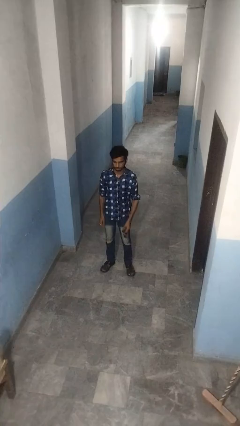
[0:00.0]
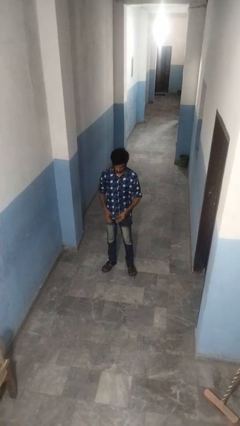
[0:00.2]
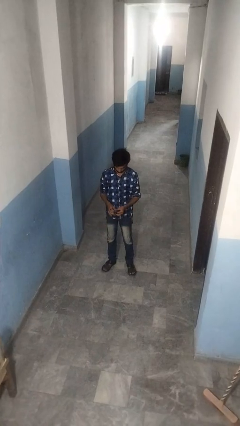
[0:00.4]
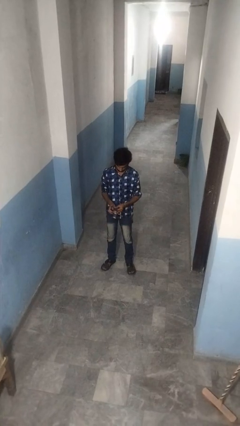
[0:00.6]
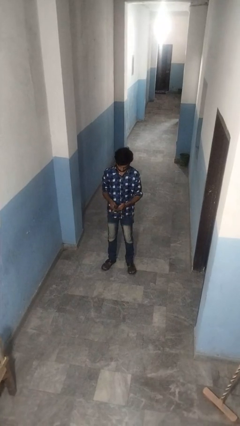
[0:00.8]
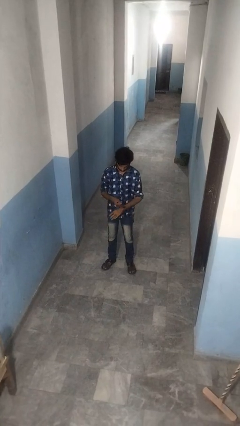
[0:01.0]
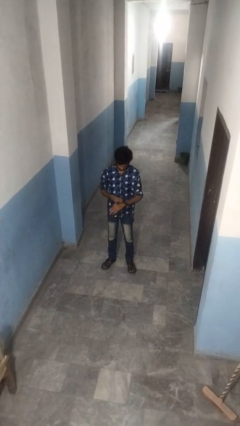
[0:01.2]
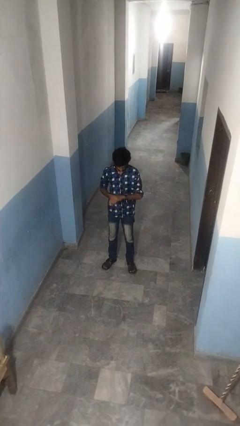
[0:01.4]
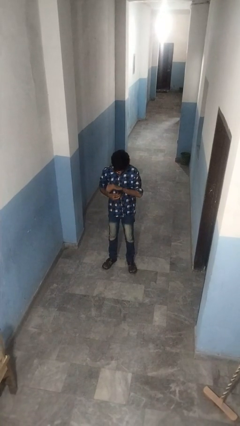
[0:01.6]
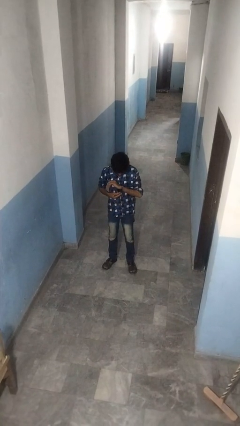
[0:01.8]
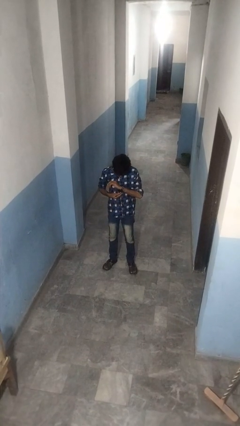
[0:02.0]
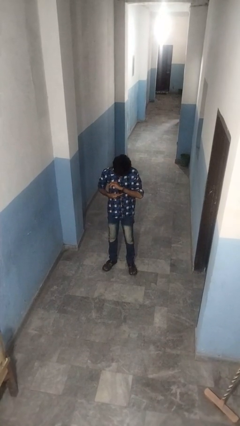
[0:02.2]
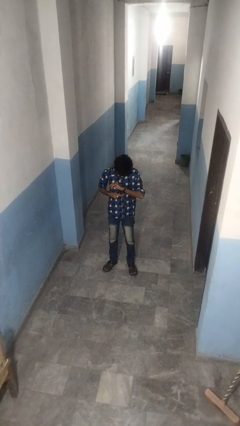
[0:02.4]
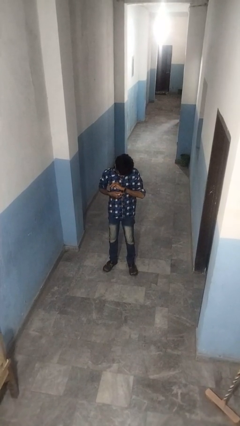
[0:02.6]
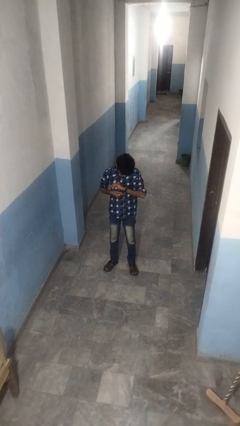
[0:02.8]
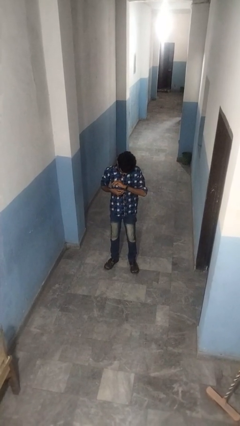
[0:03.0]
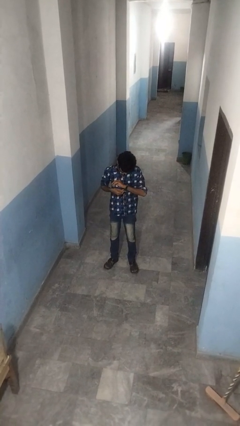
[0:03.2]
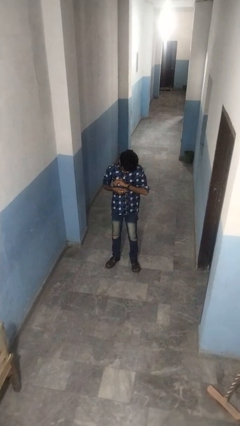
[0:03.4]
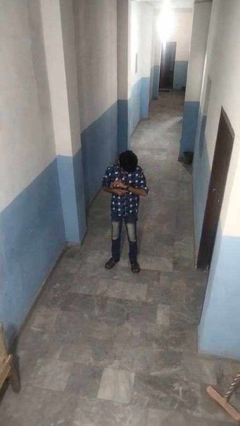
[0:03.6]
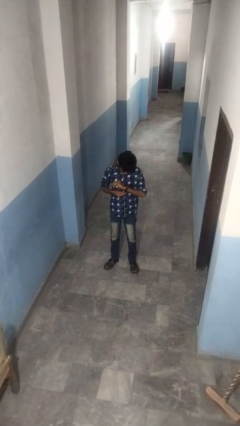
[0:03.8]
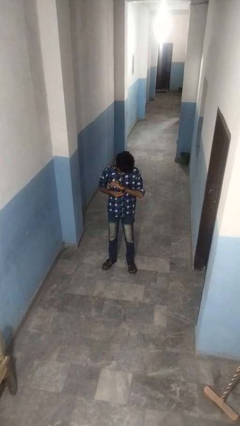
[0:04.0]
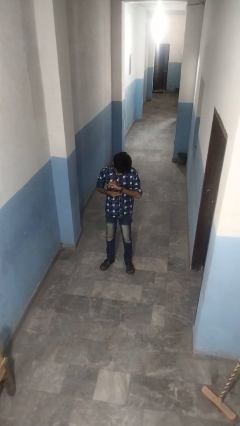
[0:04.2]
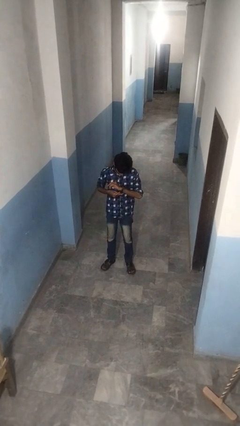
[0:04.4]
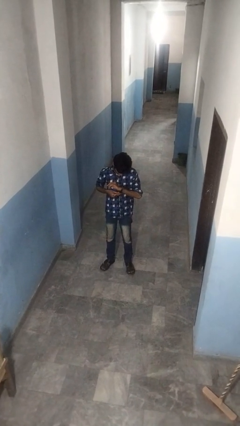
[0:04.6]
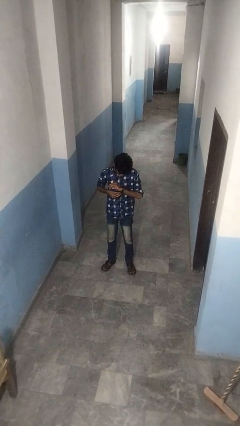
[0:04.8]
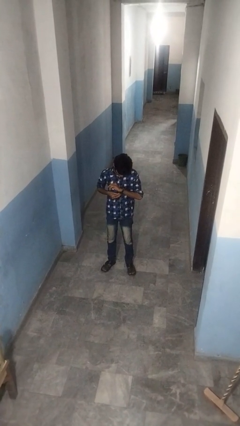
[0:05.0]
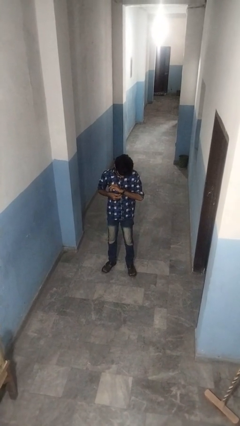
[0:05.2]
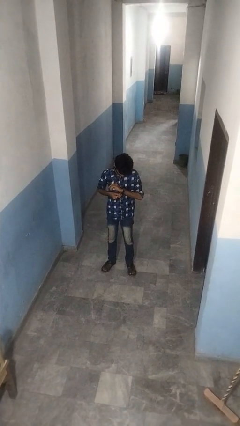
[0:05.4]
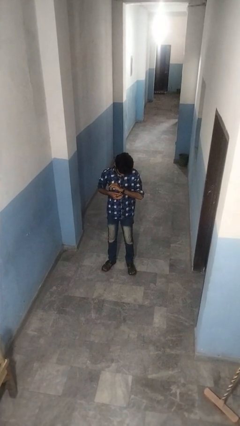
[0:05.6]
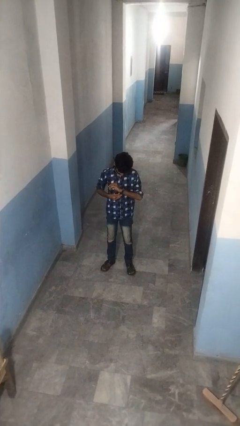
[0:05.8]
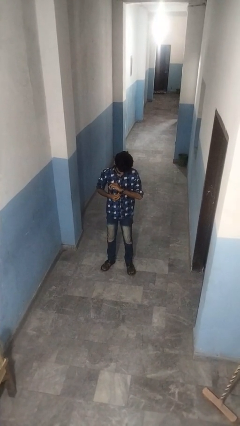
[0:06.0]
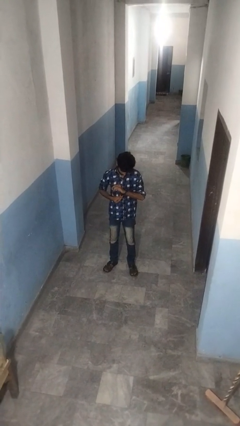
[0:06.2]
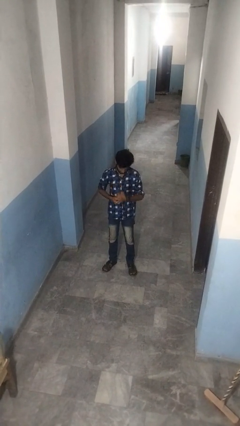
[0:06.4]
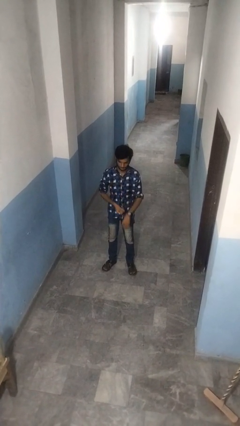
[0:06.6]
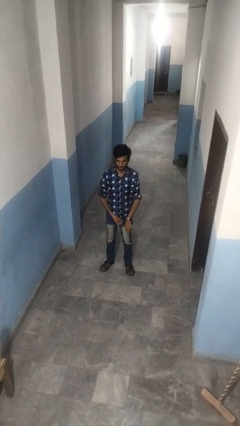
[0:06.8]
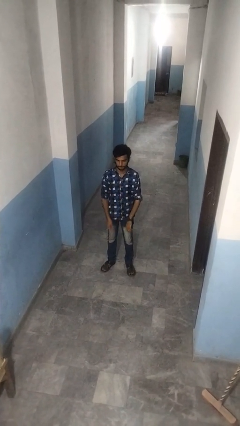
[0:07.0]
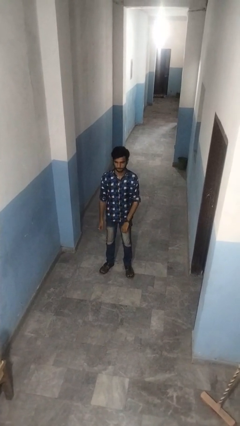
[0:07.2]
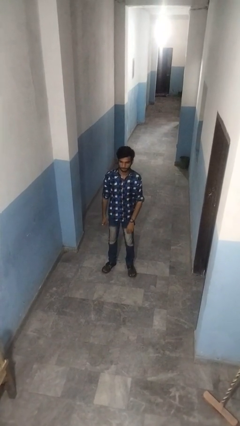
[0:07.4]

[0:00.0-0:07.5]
person puts on wristwatch

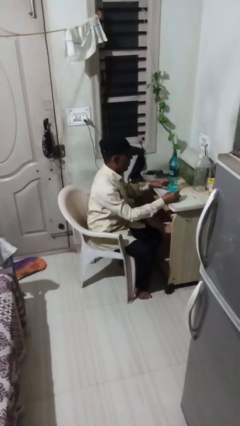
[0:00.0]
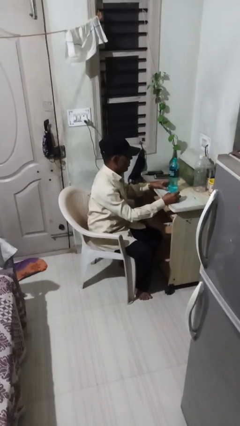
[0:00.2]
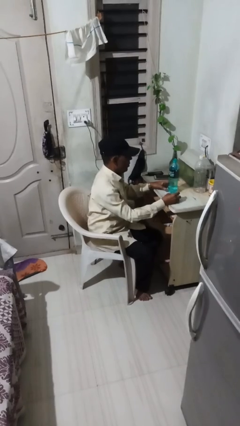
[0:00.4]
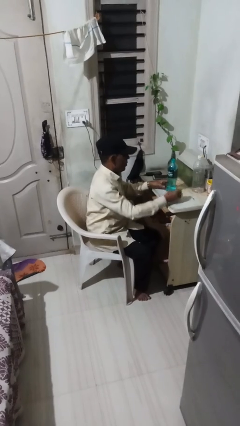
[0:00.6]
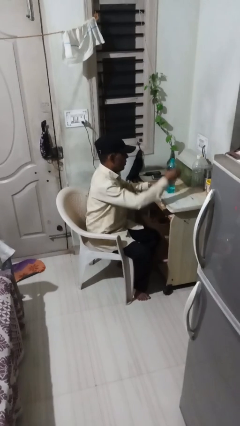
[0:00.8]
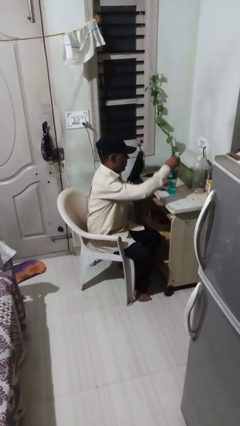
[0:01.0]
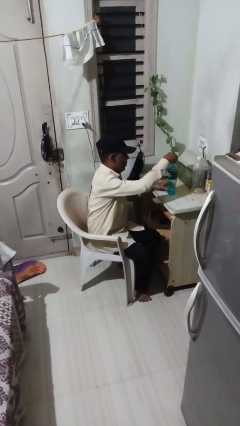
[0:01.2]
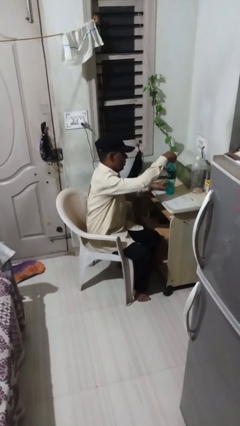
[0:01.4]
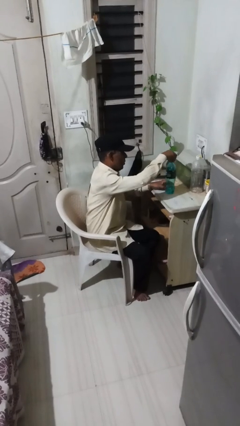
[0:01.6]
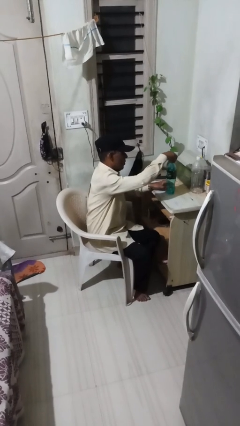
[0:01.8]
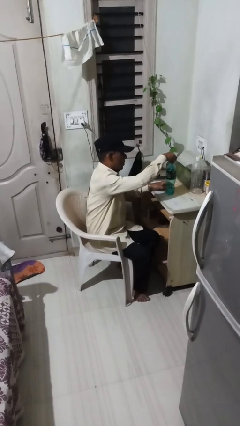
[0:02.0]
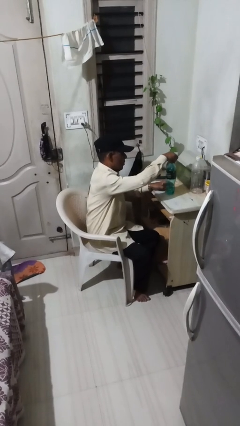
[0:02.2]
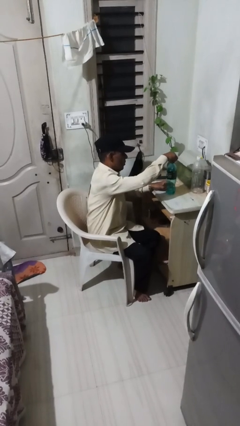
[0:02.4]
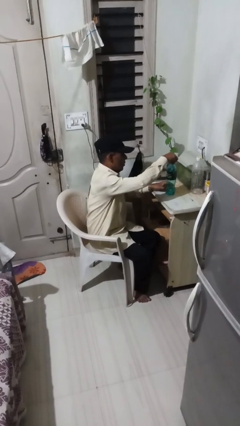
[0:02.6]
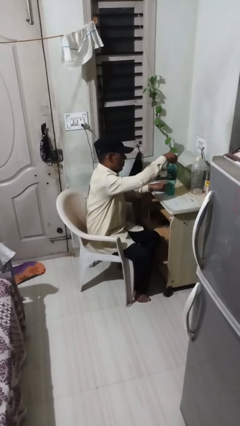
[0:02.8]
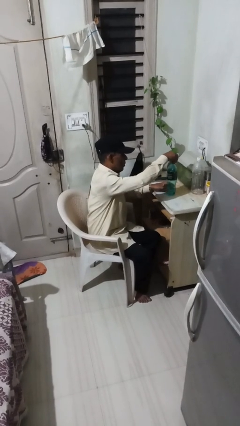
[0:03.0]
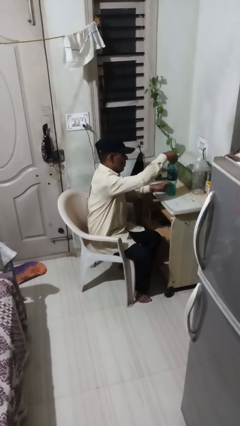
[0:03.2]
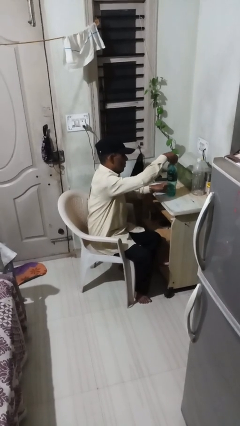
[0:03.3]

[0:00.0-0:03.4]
person screws lid to bottle

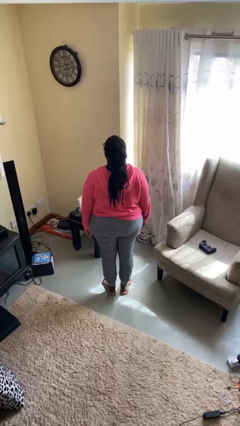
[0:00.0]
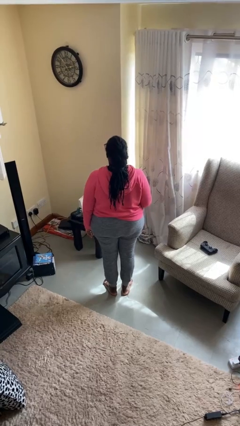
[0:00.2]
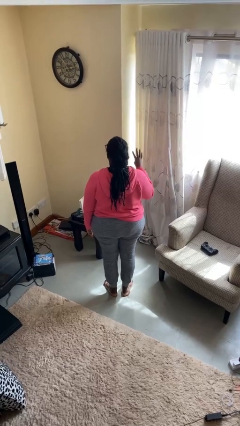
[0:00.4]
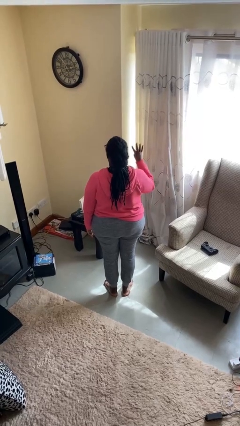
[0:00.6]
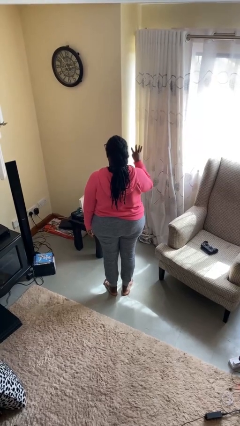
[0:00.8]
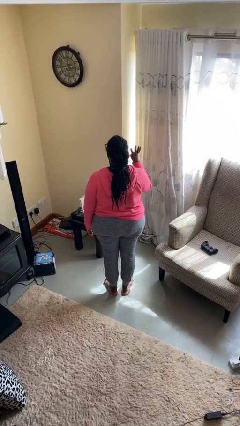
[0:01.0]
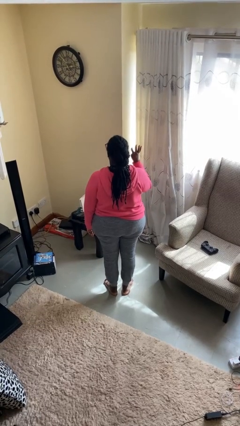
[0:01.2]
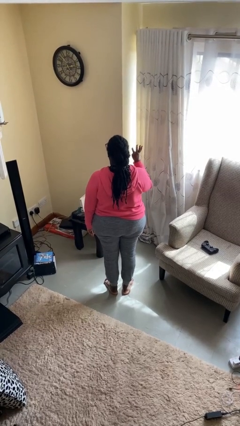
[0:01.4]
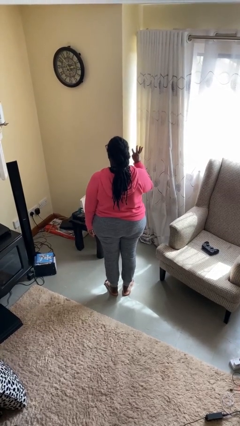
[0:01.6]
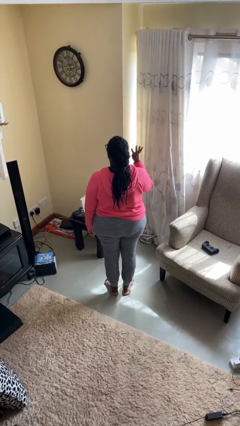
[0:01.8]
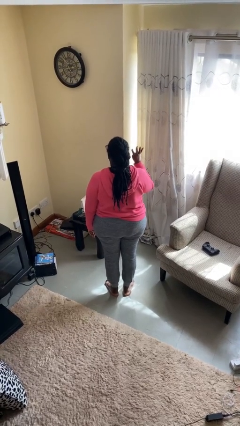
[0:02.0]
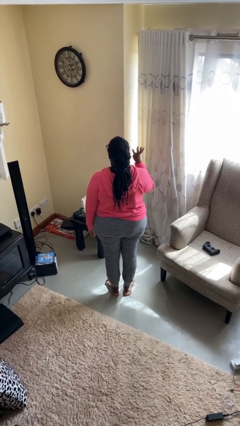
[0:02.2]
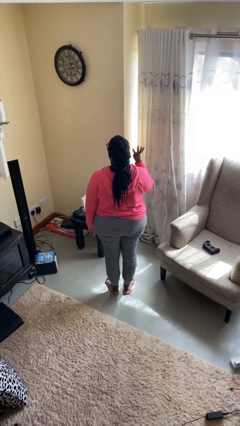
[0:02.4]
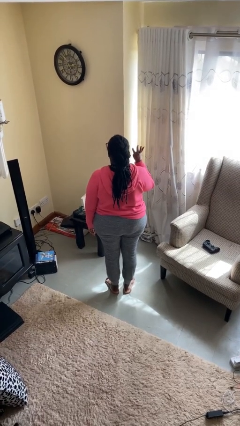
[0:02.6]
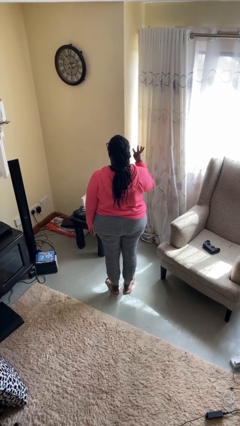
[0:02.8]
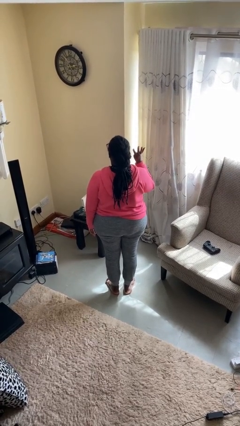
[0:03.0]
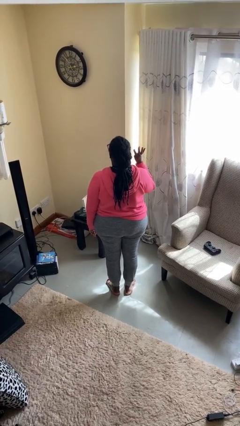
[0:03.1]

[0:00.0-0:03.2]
person gestures number four

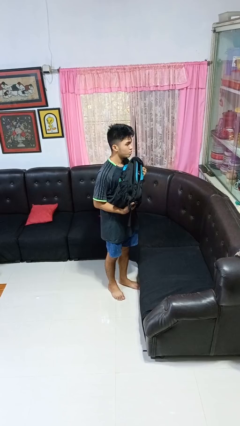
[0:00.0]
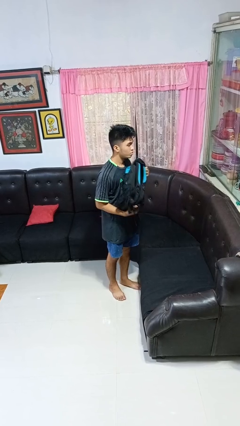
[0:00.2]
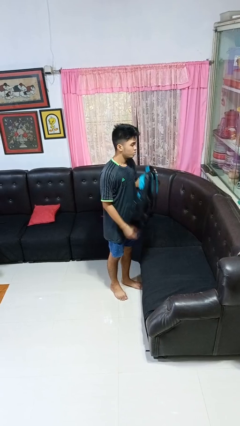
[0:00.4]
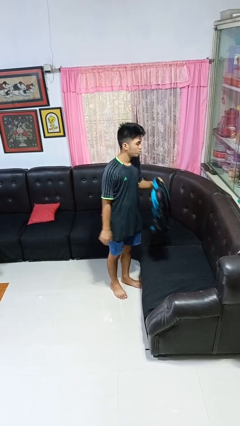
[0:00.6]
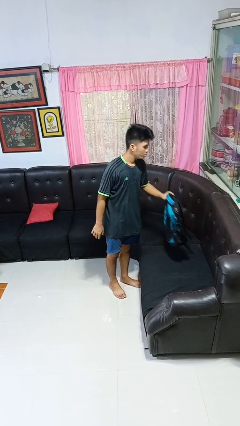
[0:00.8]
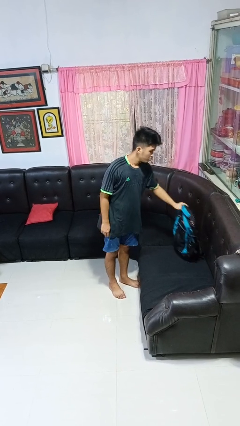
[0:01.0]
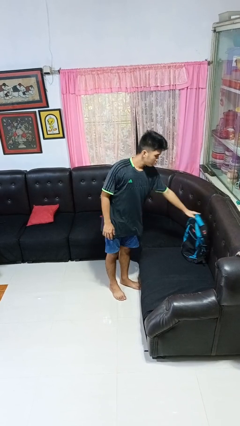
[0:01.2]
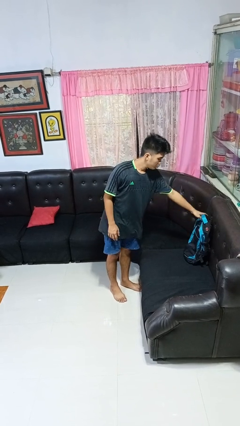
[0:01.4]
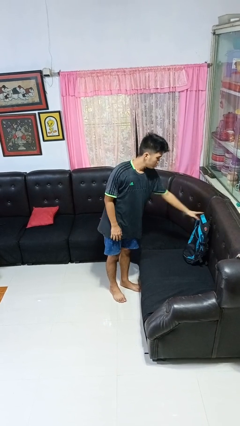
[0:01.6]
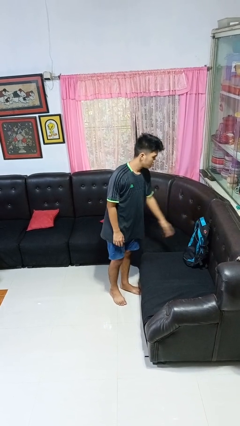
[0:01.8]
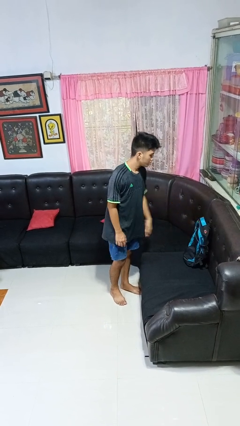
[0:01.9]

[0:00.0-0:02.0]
person puts down object on couch

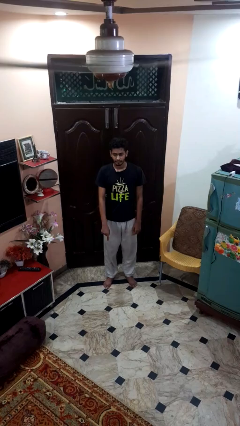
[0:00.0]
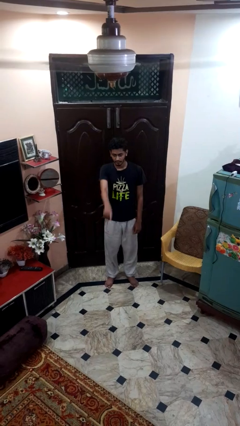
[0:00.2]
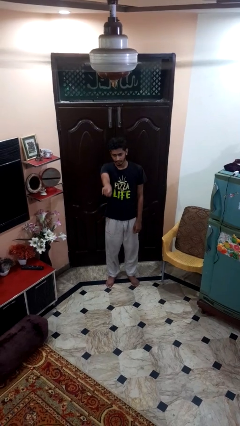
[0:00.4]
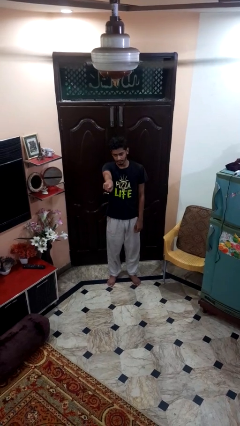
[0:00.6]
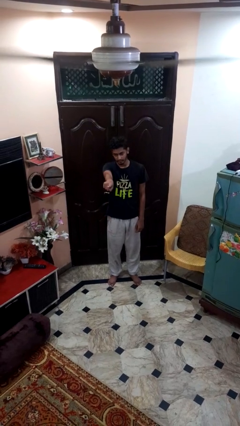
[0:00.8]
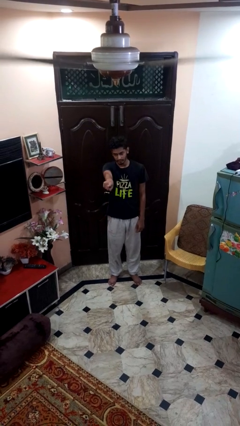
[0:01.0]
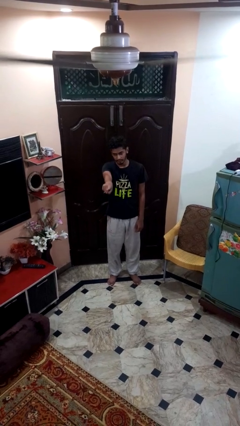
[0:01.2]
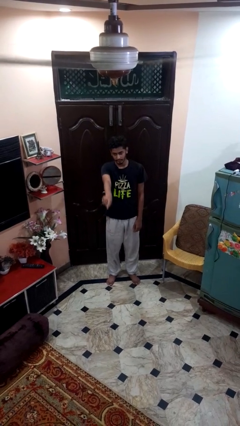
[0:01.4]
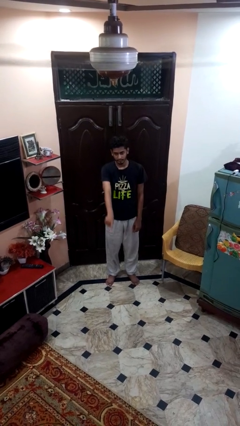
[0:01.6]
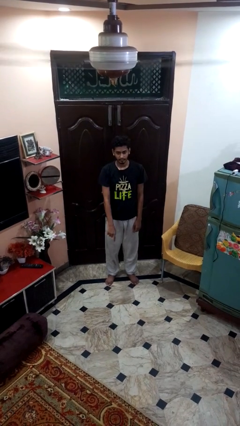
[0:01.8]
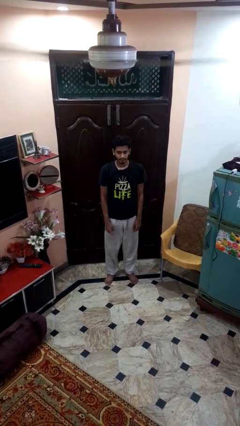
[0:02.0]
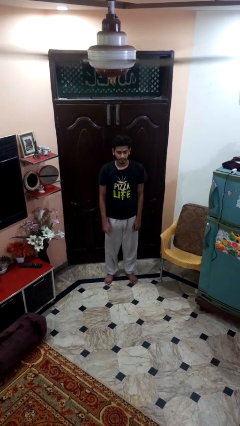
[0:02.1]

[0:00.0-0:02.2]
person points at person
